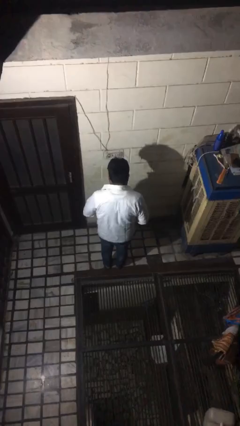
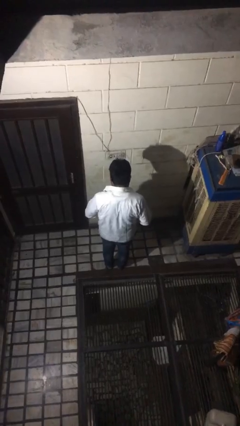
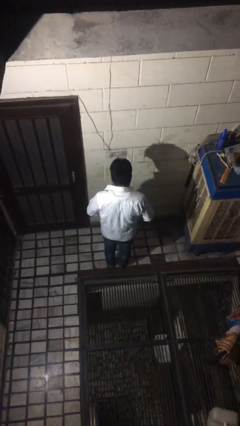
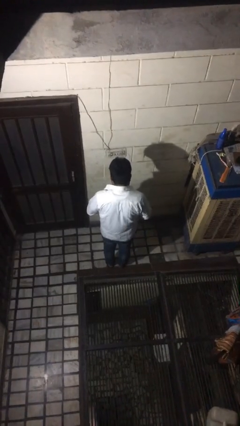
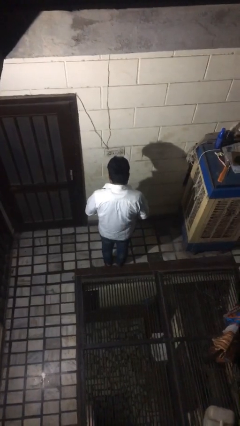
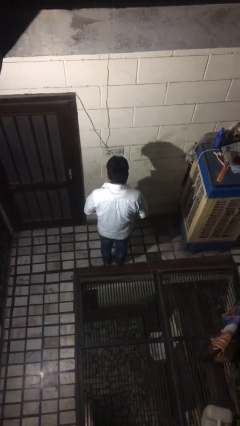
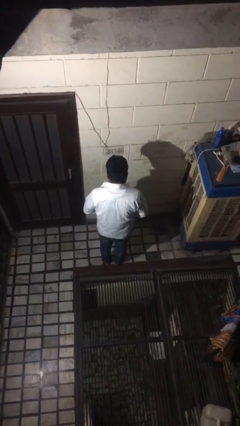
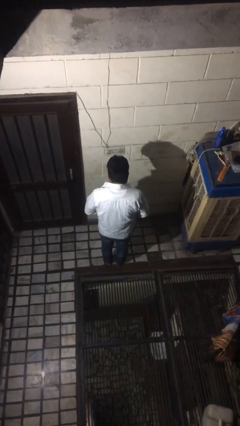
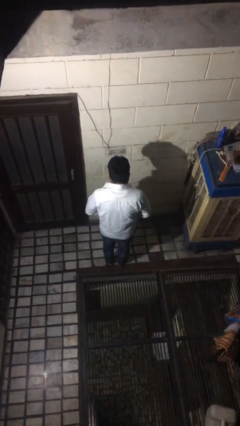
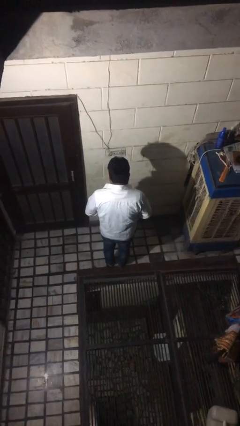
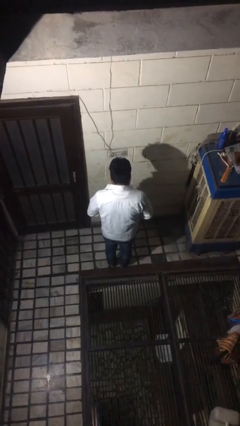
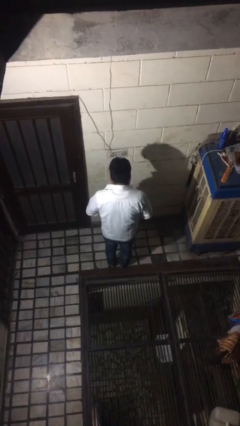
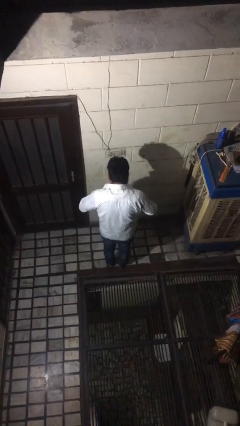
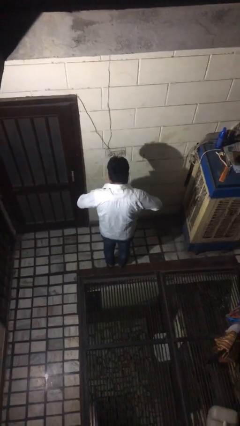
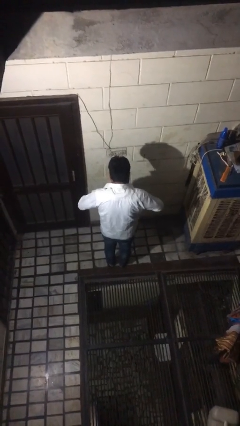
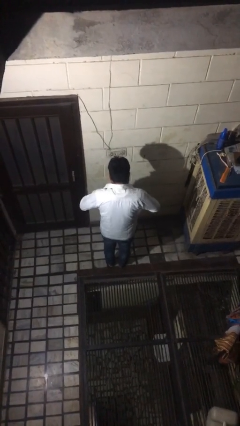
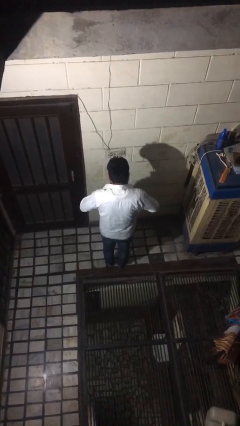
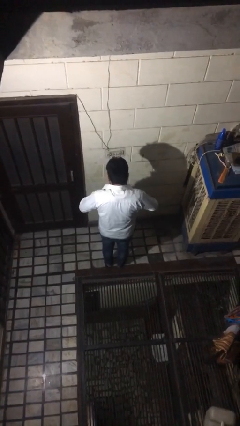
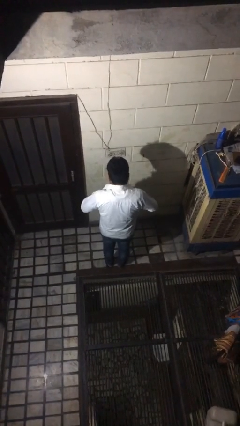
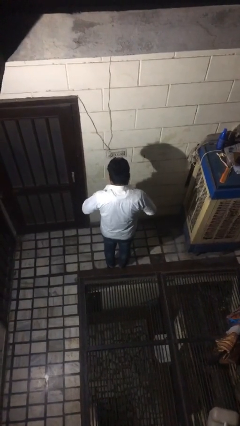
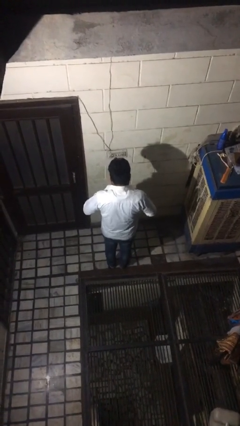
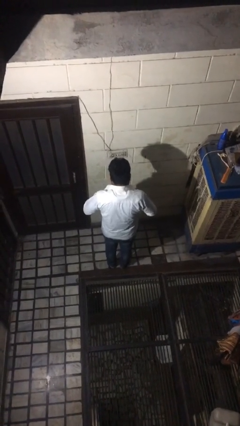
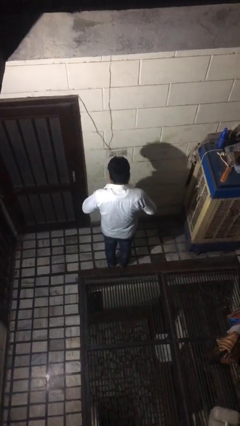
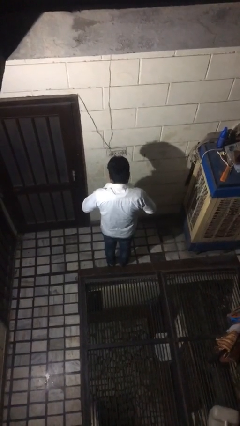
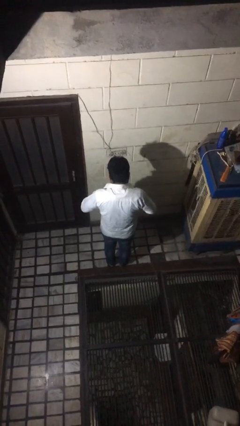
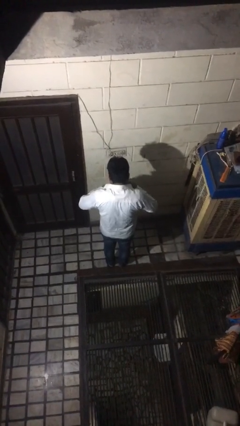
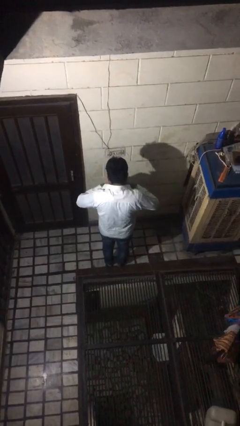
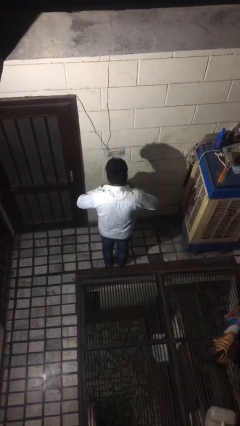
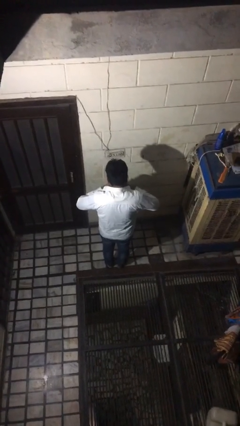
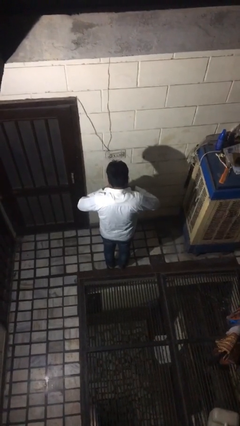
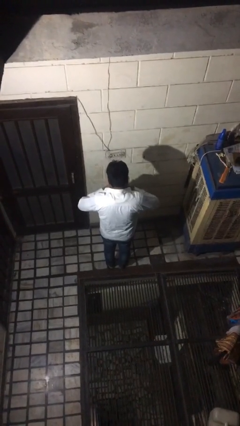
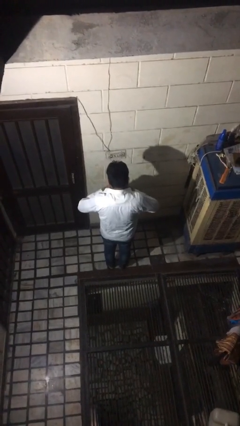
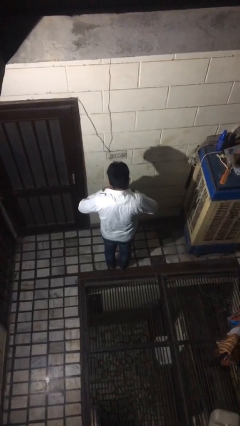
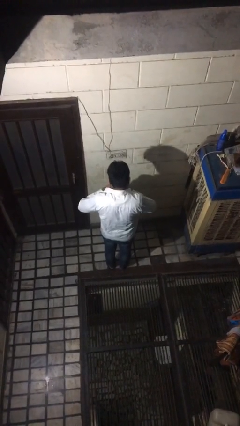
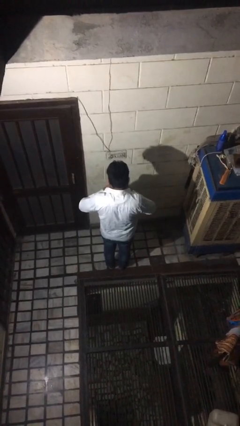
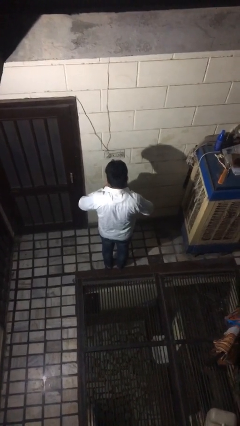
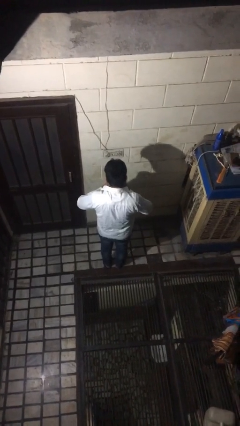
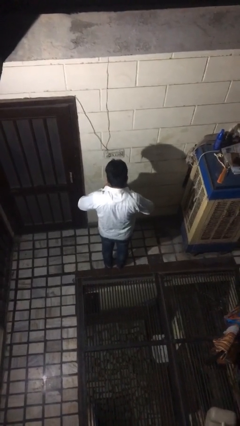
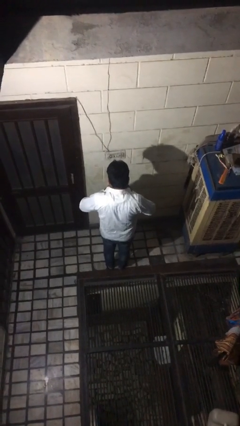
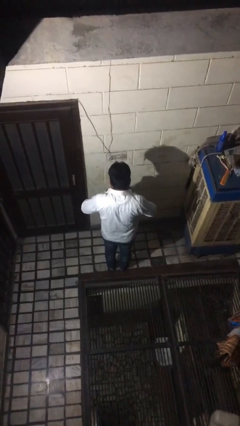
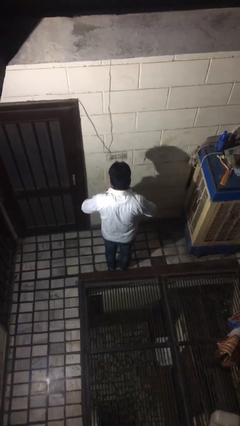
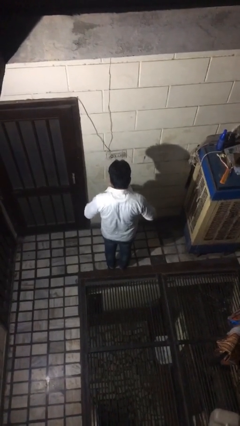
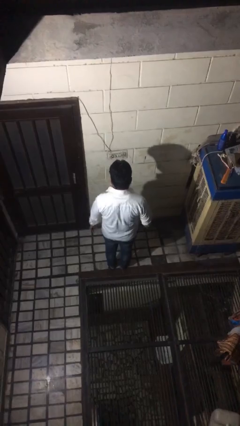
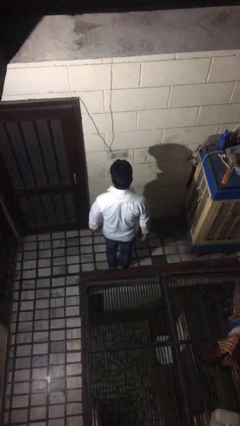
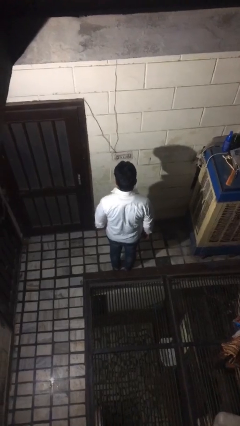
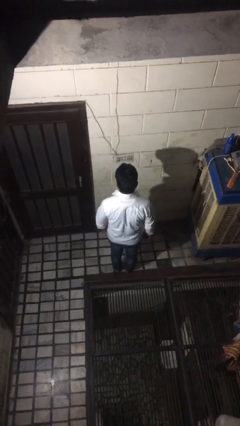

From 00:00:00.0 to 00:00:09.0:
person buttons shirt

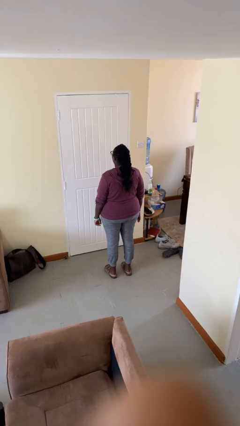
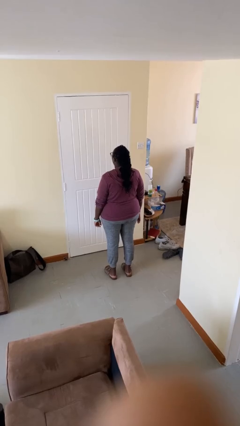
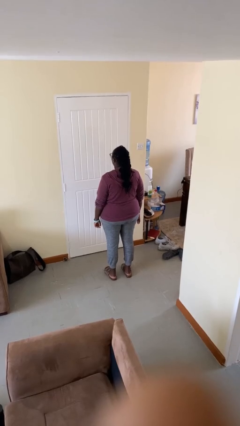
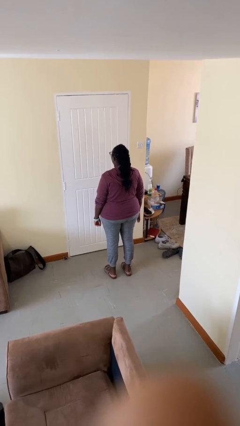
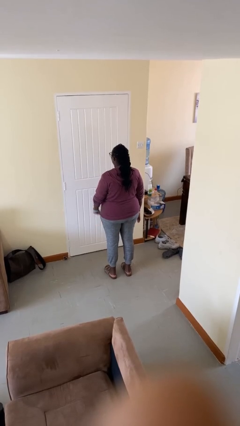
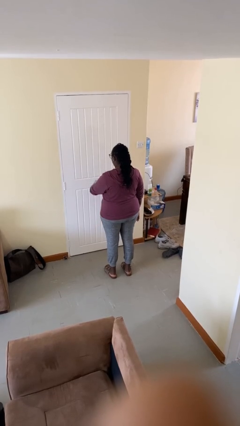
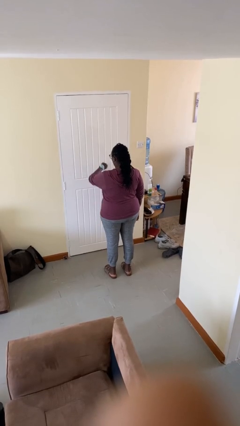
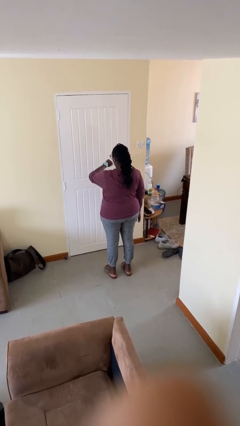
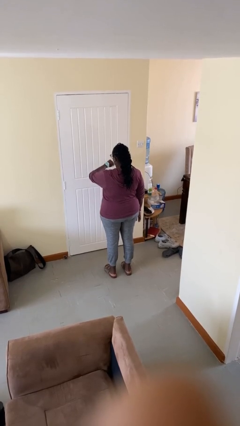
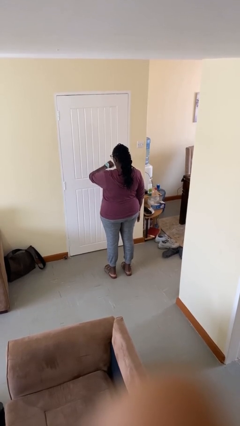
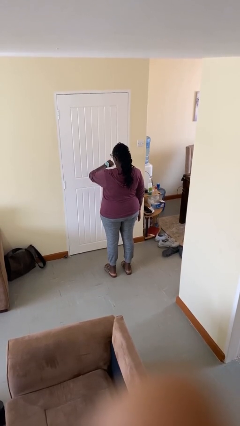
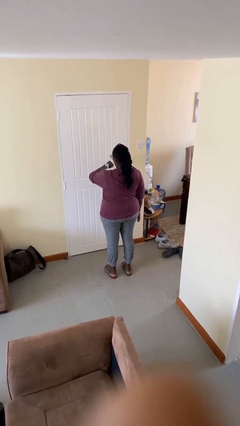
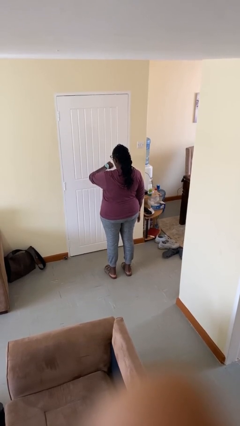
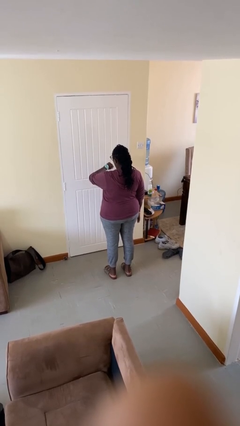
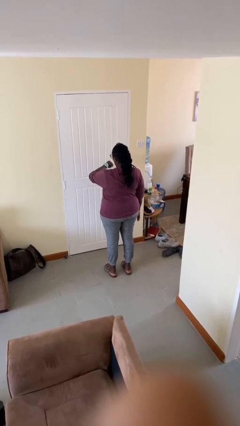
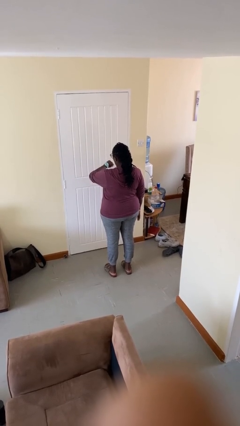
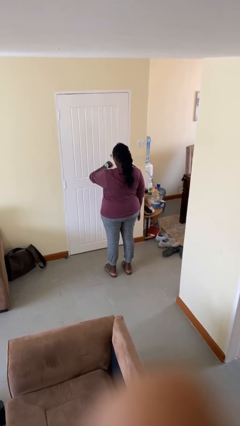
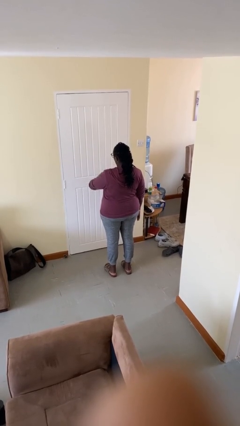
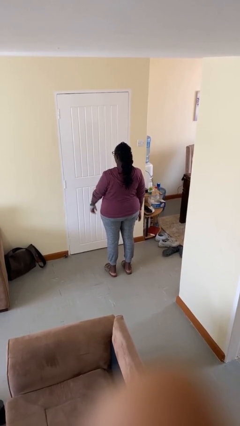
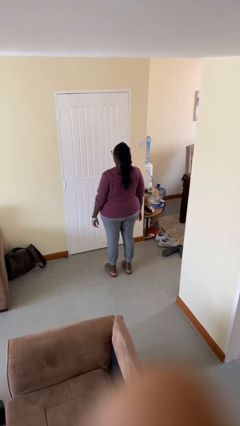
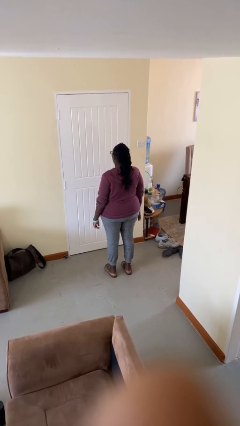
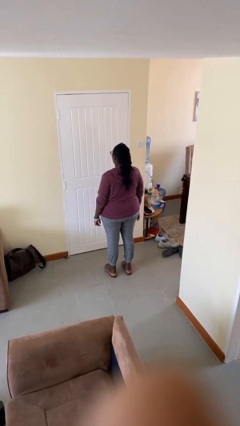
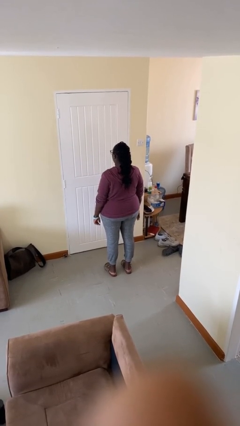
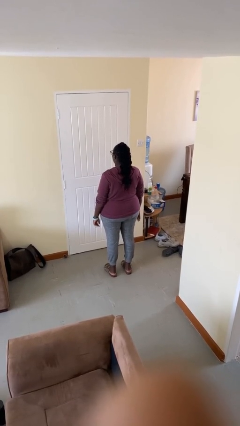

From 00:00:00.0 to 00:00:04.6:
person looks at wristwatch

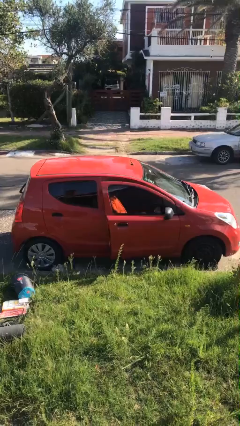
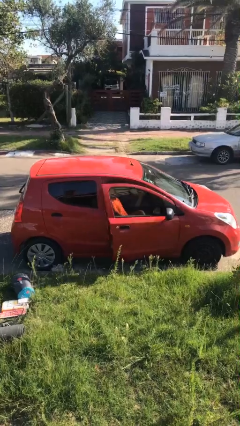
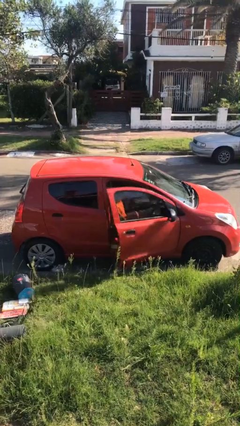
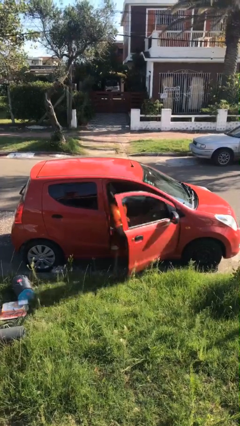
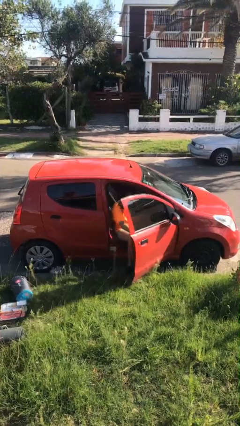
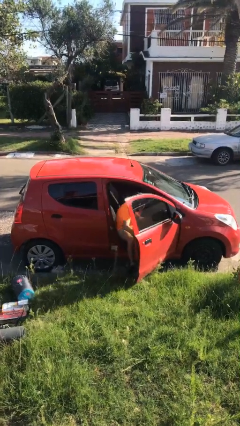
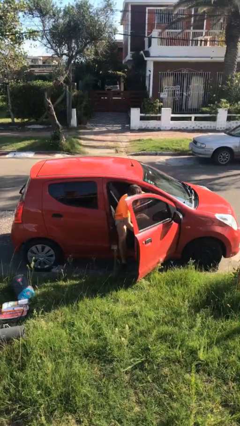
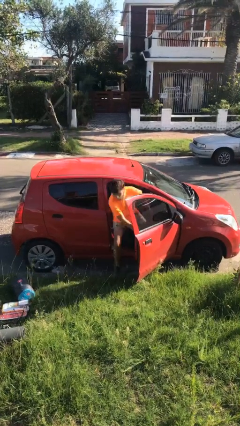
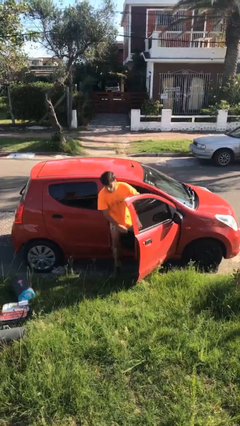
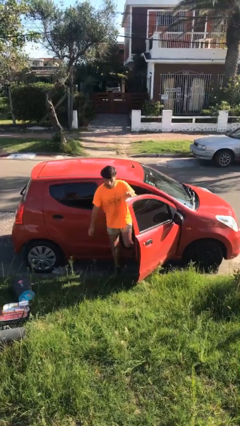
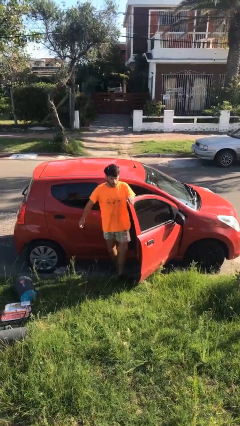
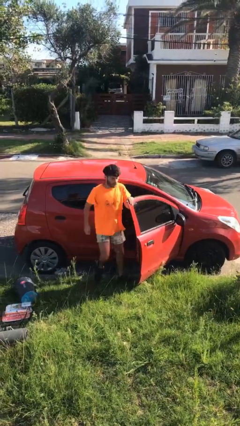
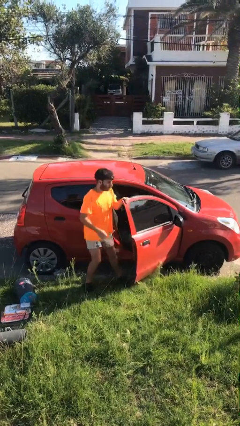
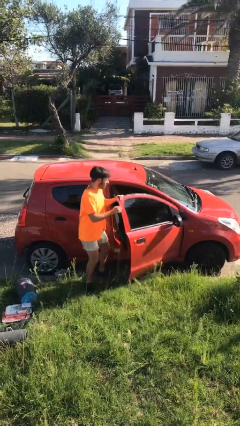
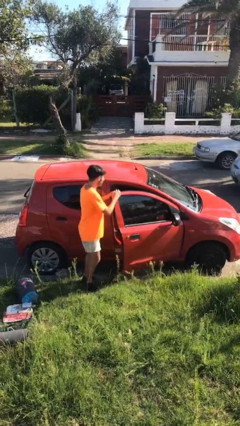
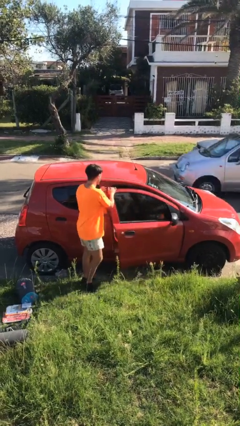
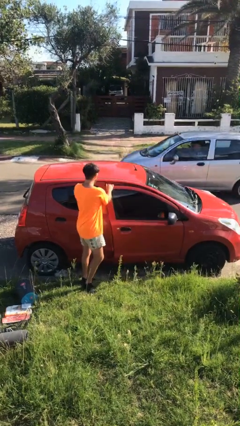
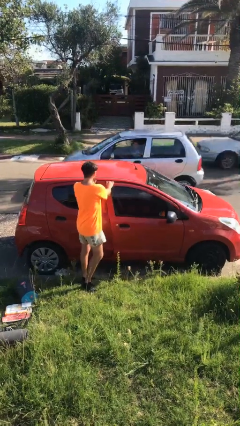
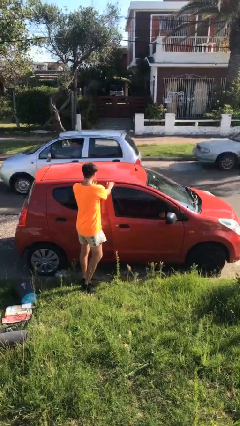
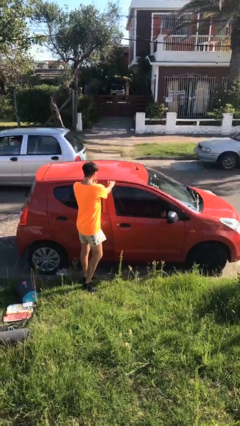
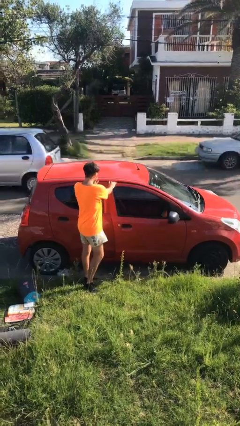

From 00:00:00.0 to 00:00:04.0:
car drops off person
